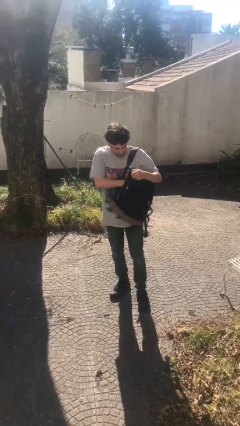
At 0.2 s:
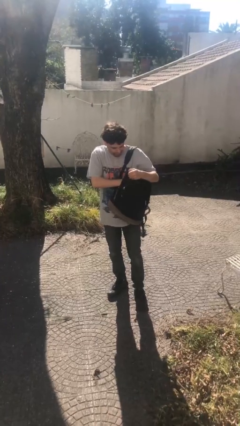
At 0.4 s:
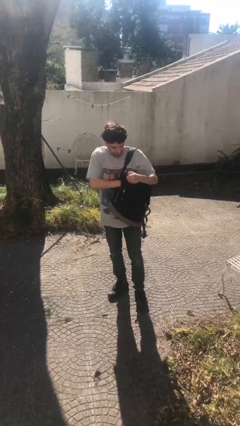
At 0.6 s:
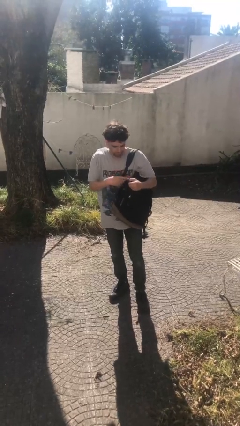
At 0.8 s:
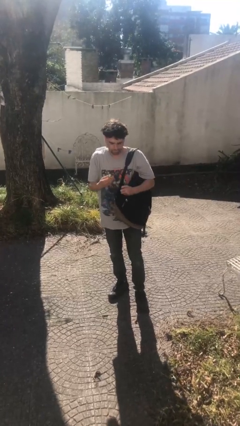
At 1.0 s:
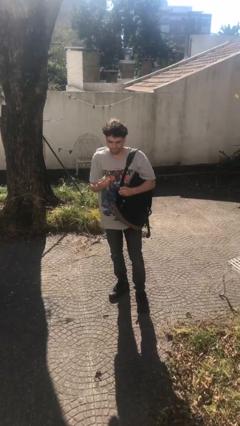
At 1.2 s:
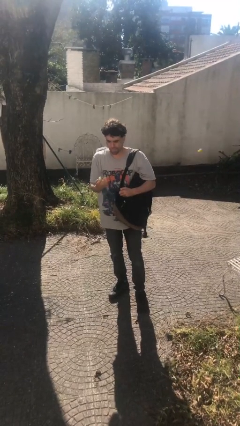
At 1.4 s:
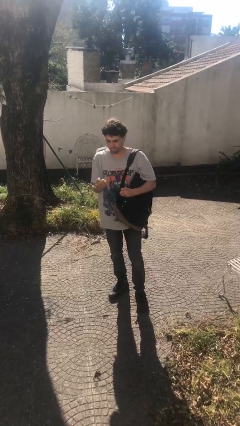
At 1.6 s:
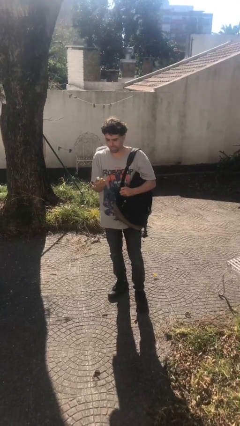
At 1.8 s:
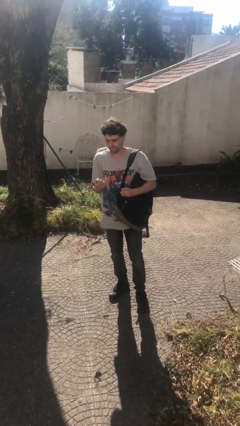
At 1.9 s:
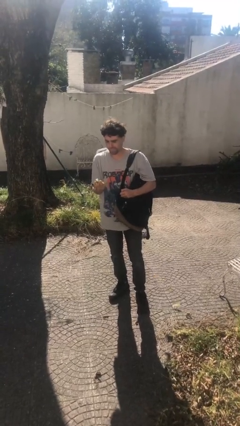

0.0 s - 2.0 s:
person takes object from backpack

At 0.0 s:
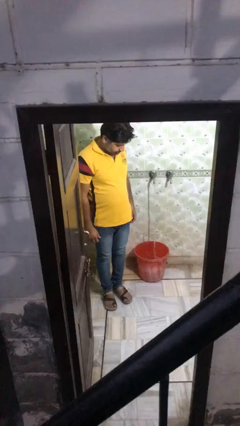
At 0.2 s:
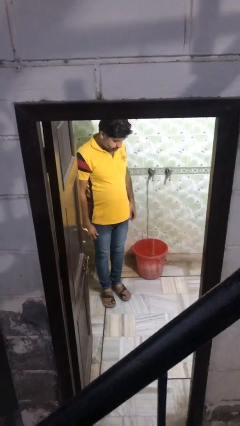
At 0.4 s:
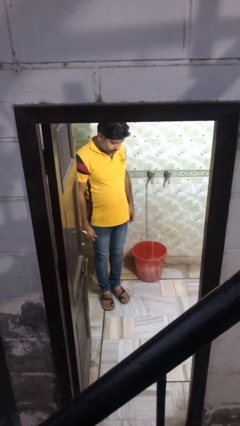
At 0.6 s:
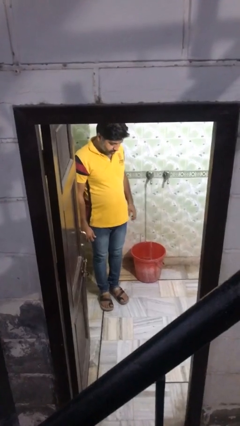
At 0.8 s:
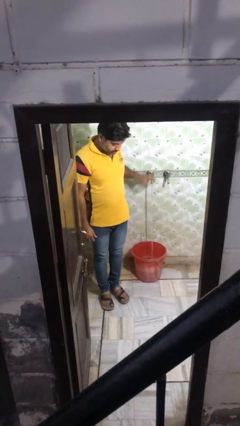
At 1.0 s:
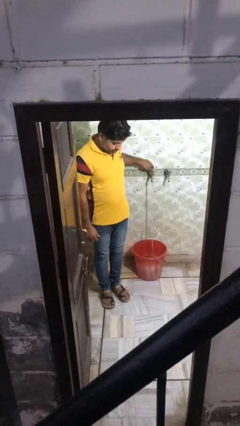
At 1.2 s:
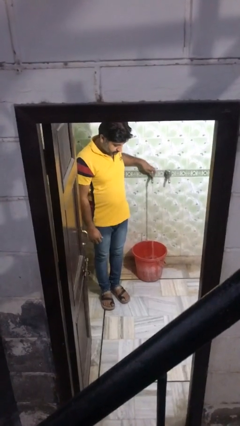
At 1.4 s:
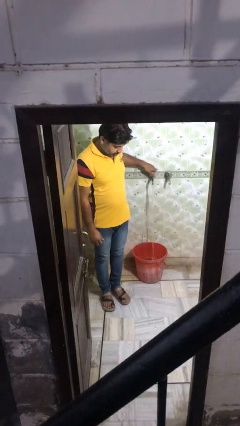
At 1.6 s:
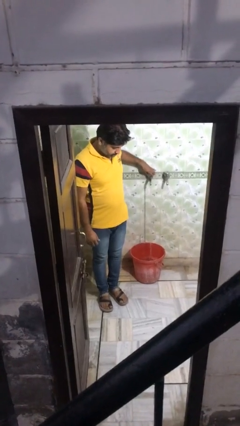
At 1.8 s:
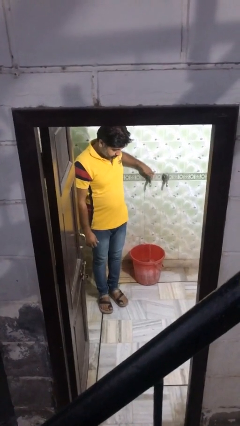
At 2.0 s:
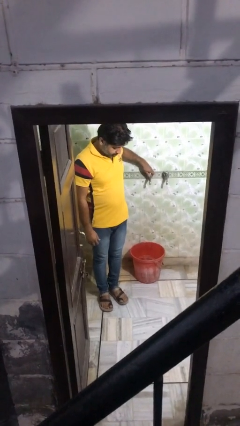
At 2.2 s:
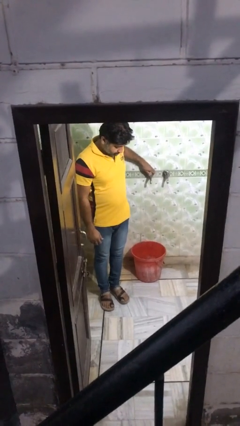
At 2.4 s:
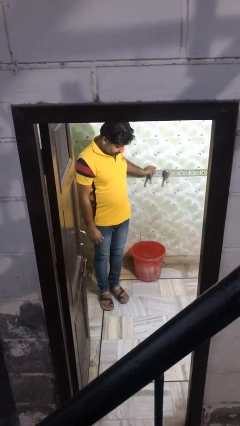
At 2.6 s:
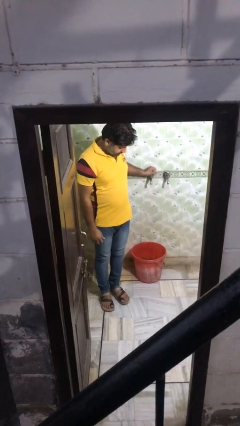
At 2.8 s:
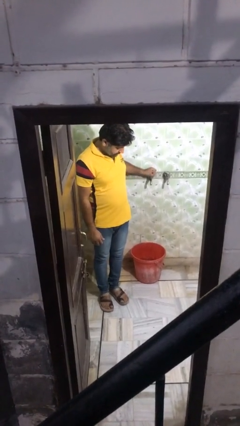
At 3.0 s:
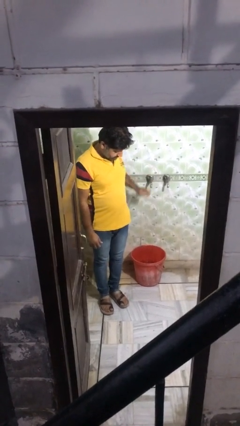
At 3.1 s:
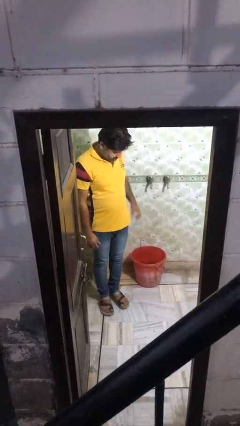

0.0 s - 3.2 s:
person turns off faucet

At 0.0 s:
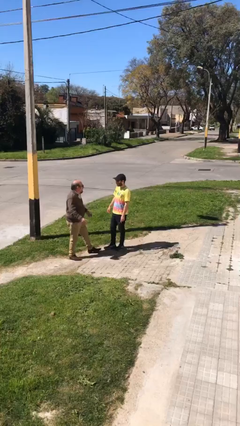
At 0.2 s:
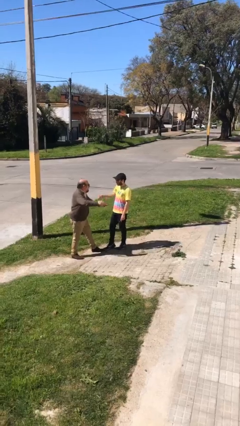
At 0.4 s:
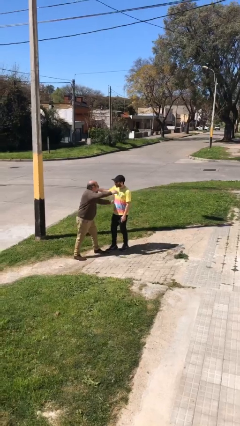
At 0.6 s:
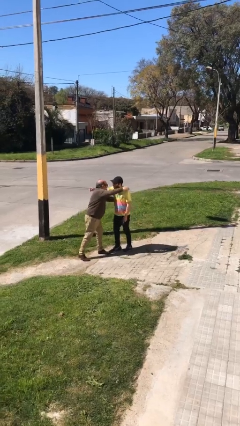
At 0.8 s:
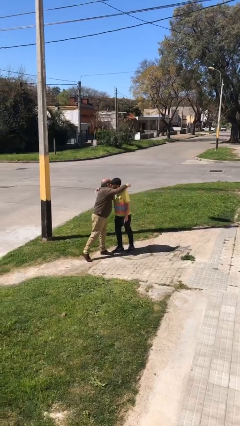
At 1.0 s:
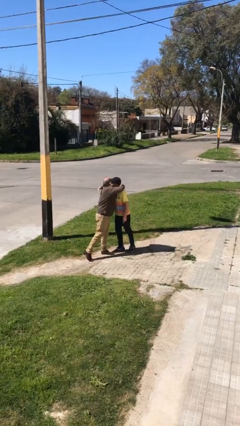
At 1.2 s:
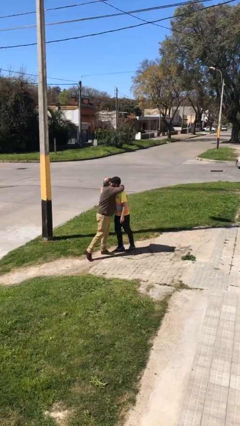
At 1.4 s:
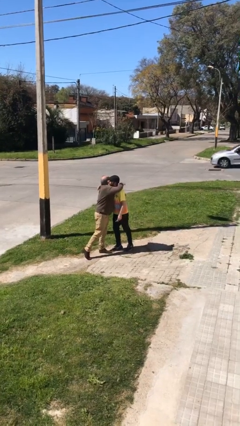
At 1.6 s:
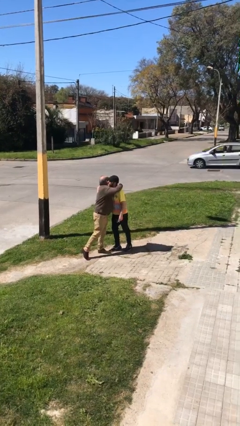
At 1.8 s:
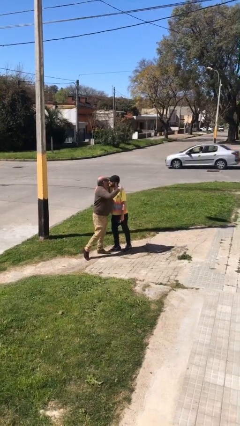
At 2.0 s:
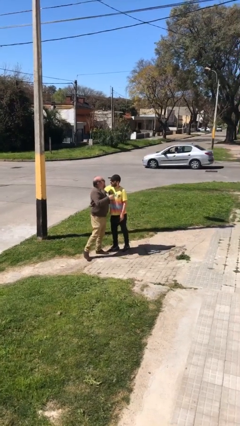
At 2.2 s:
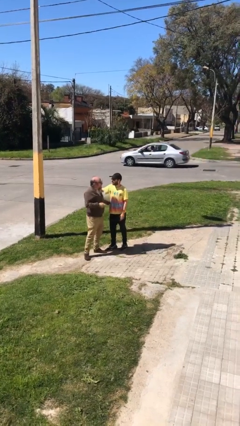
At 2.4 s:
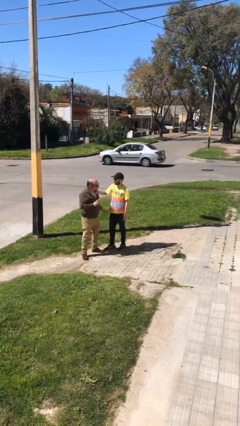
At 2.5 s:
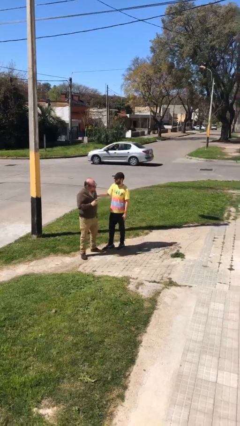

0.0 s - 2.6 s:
person embraces person

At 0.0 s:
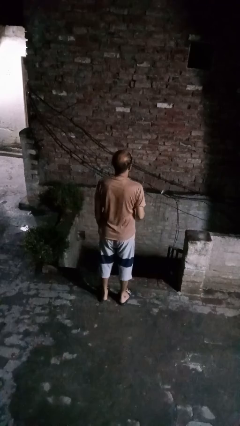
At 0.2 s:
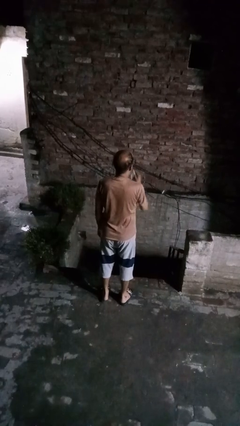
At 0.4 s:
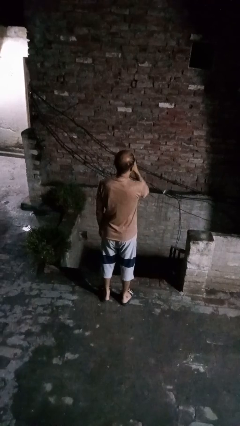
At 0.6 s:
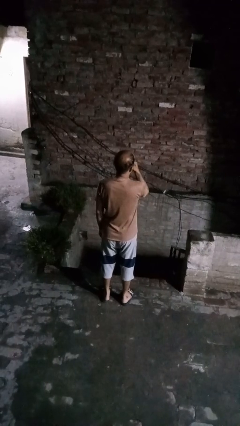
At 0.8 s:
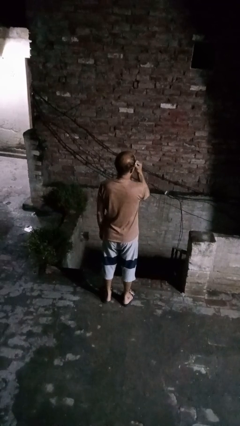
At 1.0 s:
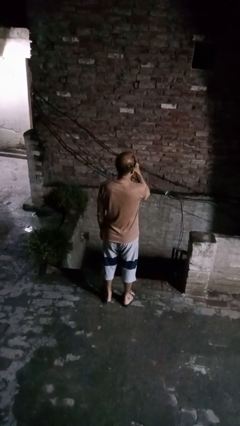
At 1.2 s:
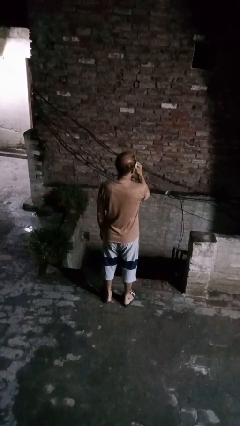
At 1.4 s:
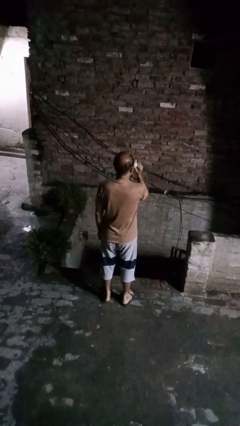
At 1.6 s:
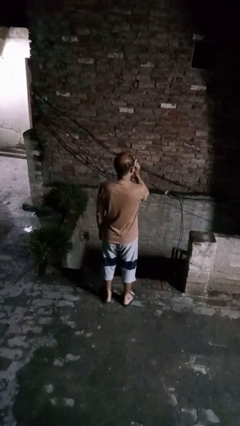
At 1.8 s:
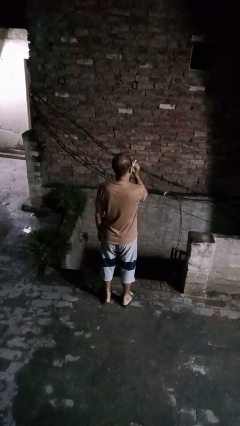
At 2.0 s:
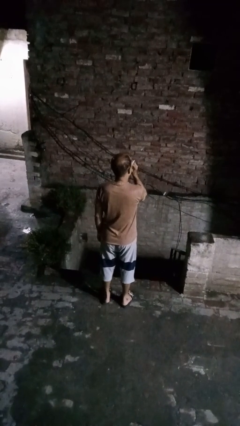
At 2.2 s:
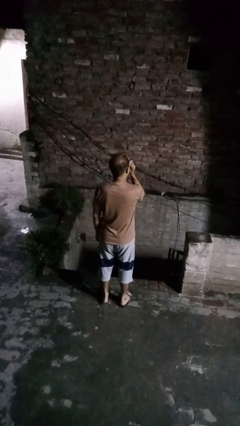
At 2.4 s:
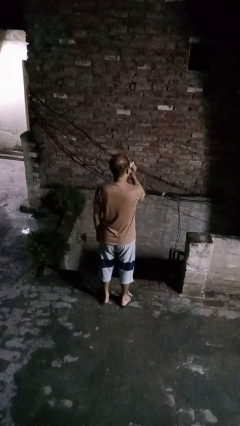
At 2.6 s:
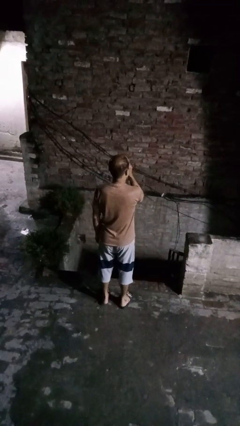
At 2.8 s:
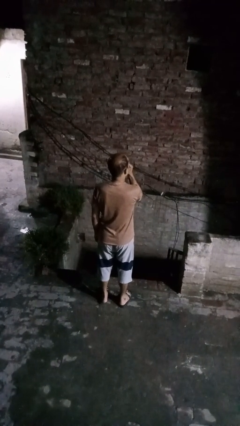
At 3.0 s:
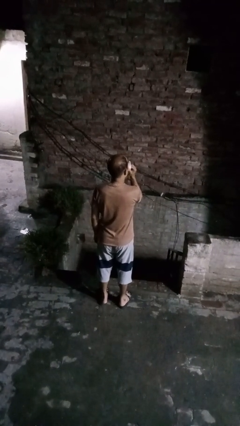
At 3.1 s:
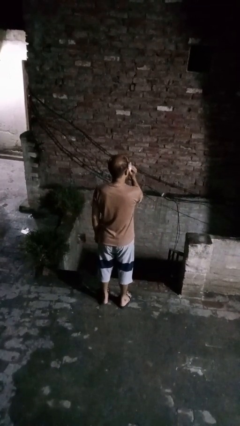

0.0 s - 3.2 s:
person blows nose

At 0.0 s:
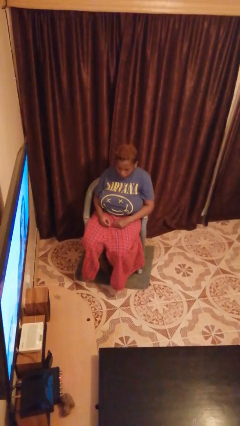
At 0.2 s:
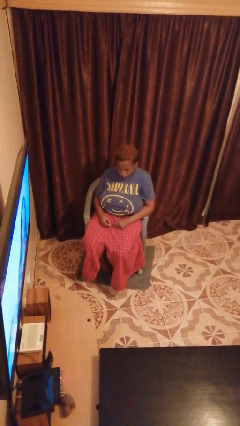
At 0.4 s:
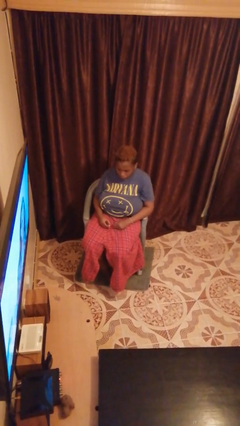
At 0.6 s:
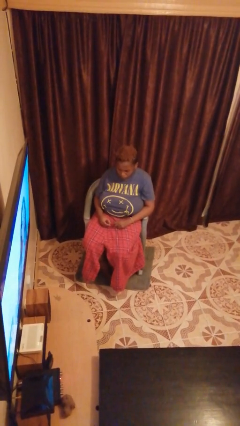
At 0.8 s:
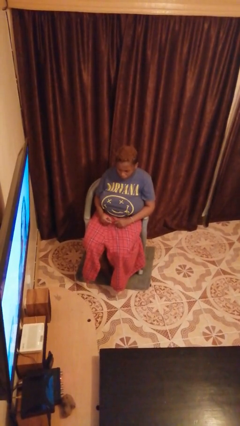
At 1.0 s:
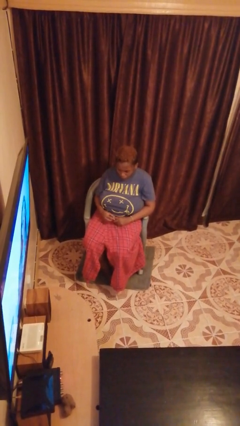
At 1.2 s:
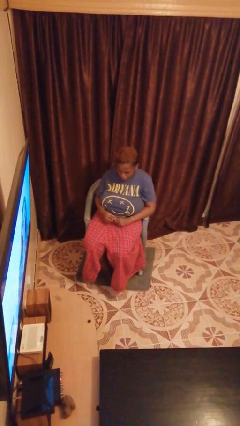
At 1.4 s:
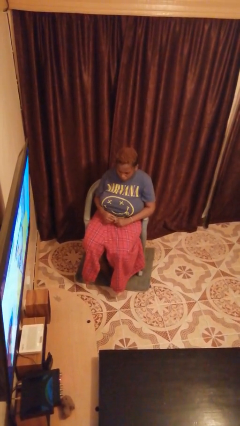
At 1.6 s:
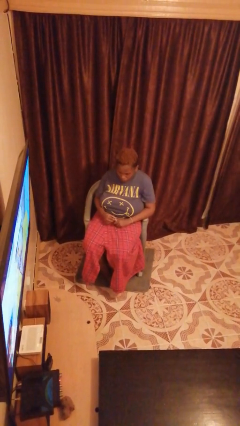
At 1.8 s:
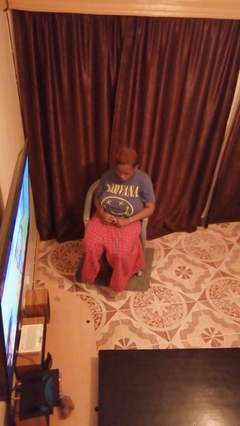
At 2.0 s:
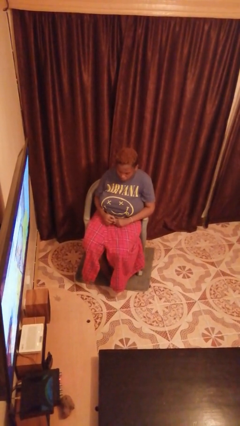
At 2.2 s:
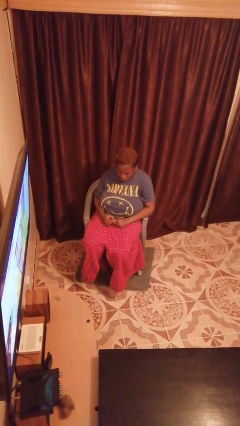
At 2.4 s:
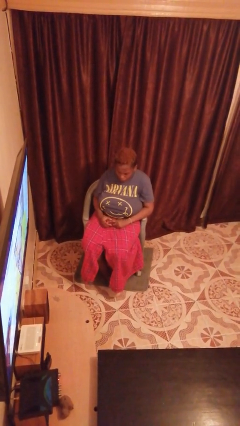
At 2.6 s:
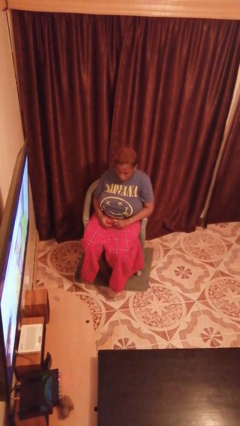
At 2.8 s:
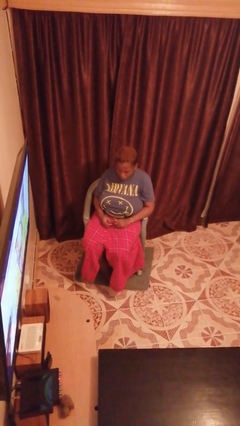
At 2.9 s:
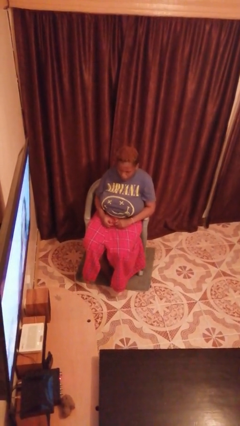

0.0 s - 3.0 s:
person puts on ring

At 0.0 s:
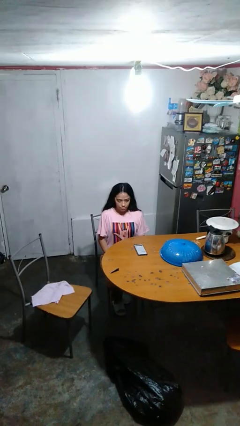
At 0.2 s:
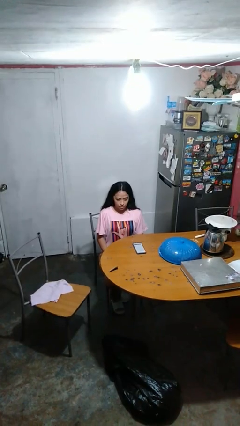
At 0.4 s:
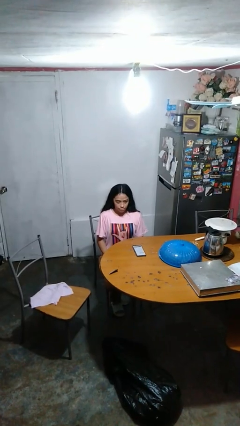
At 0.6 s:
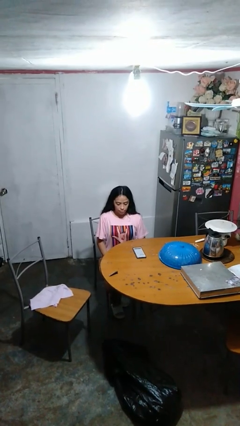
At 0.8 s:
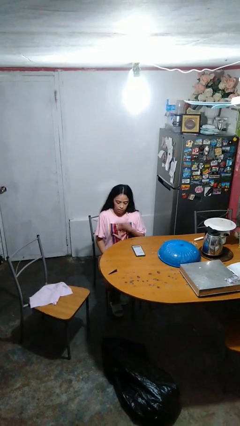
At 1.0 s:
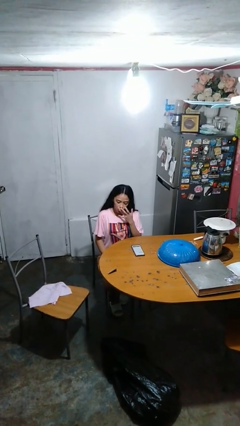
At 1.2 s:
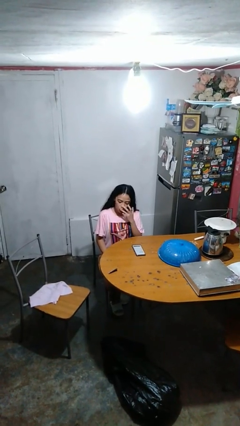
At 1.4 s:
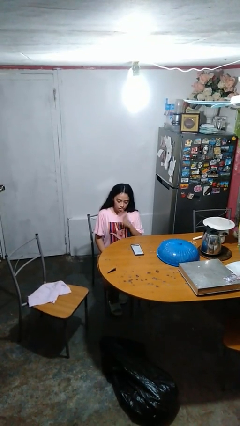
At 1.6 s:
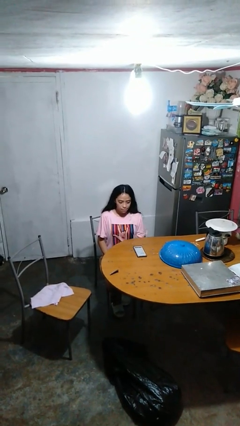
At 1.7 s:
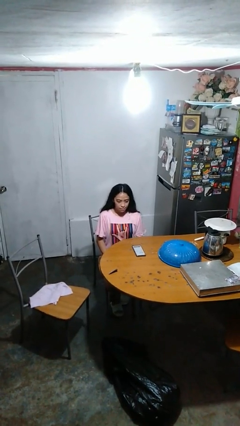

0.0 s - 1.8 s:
person licks fingers

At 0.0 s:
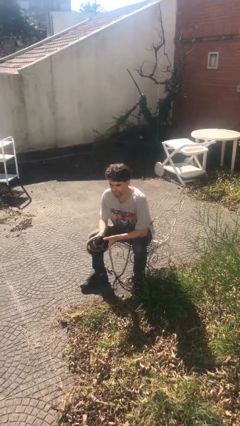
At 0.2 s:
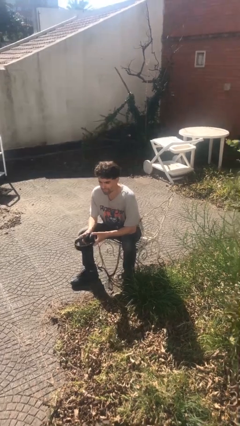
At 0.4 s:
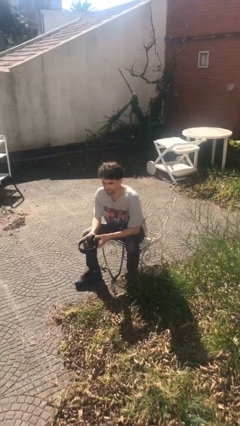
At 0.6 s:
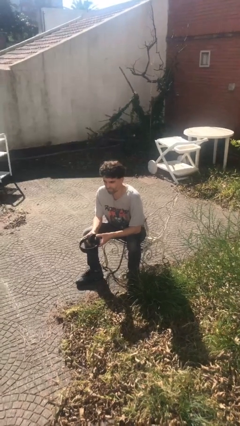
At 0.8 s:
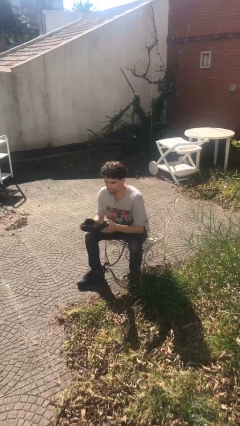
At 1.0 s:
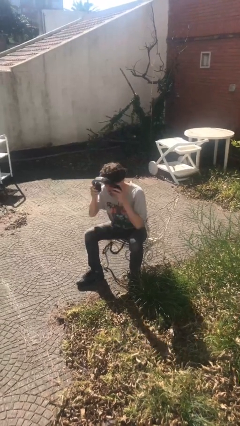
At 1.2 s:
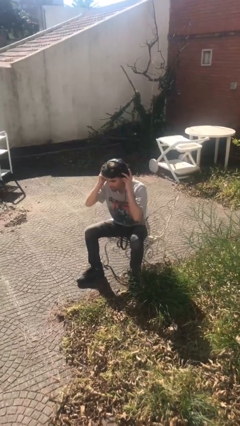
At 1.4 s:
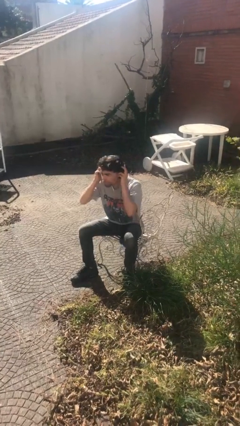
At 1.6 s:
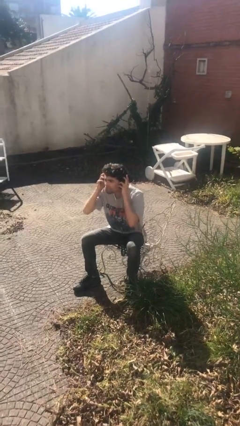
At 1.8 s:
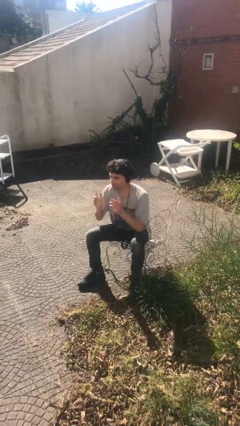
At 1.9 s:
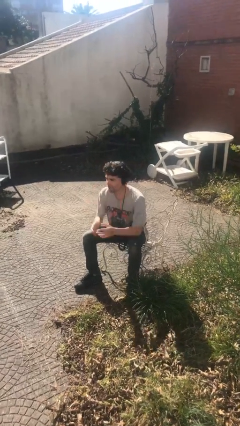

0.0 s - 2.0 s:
person puts on headphones
